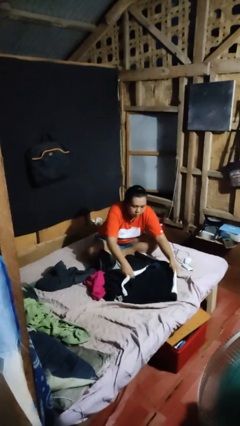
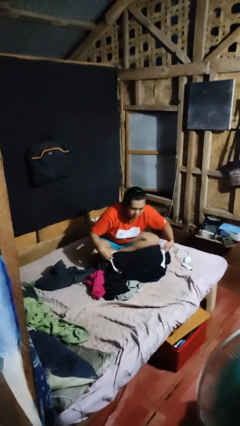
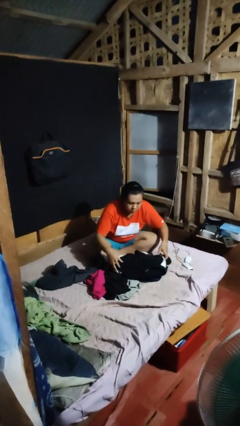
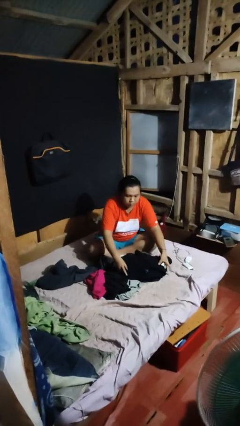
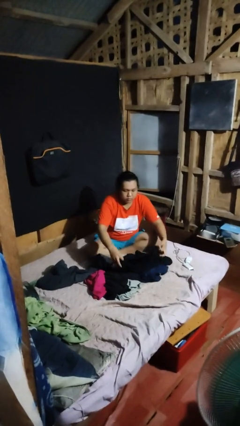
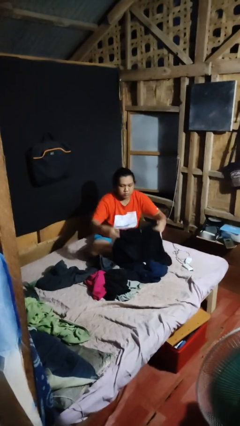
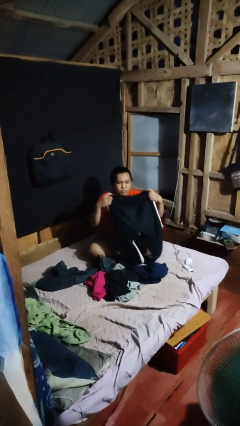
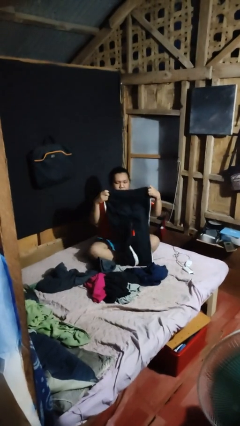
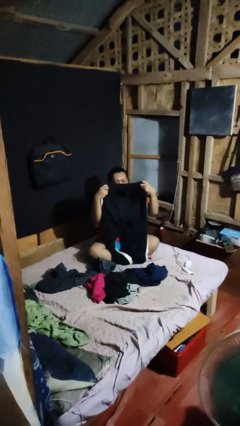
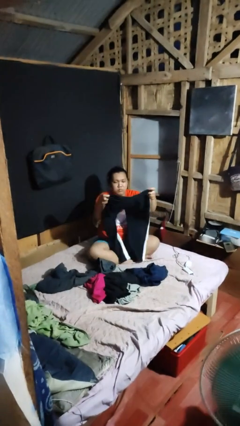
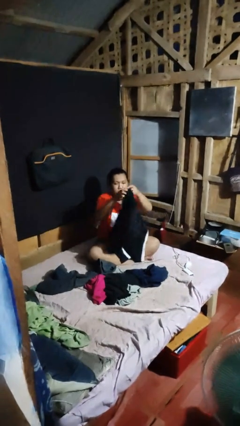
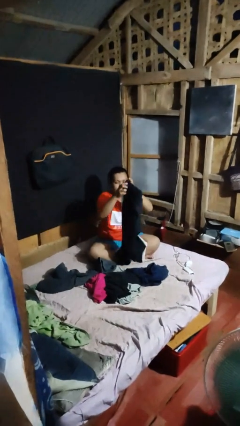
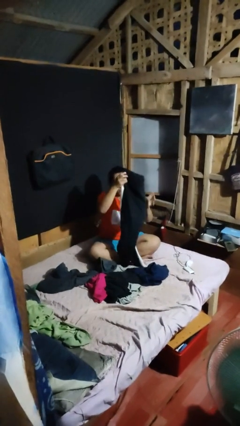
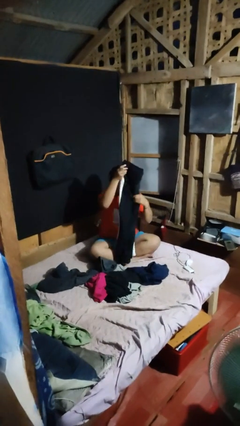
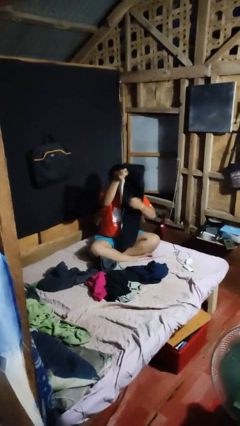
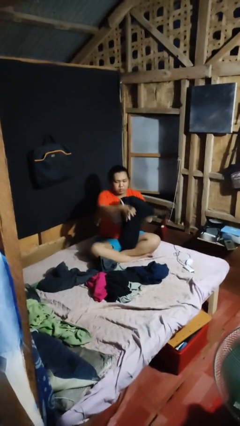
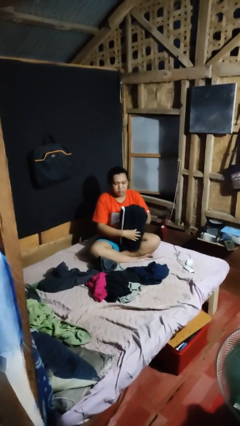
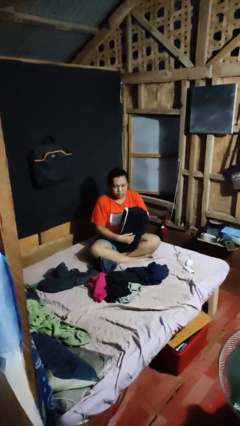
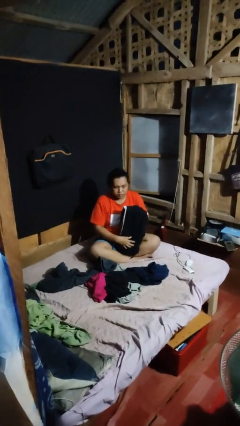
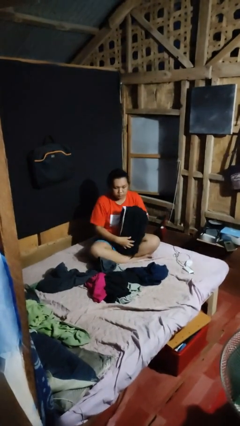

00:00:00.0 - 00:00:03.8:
person folds pants

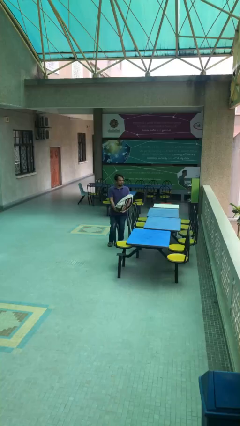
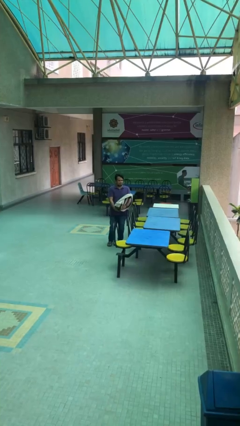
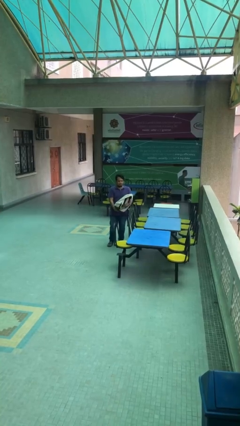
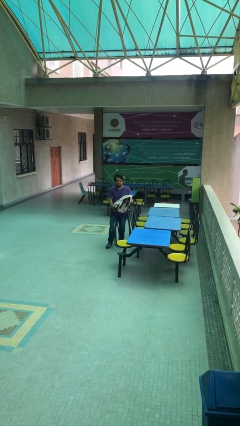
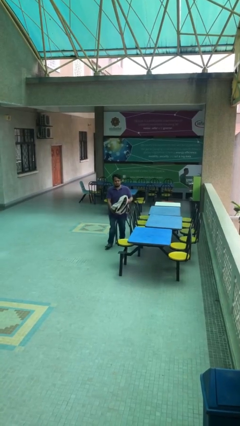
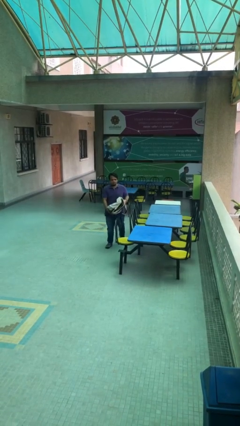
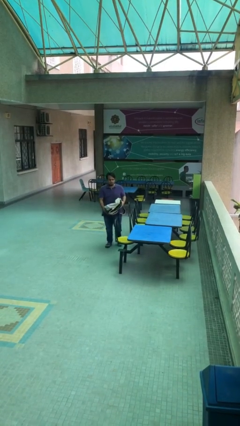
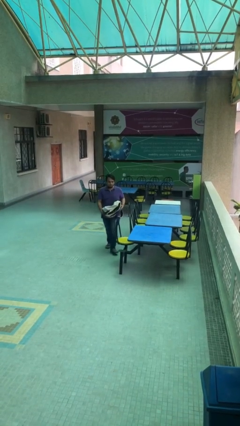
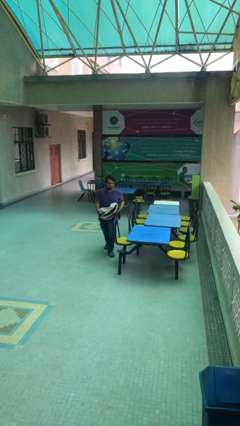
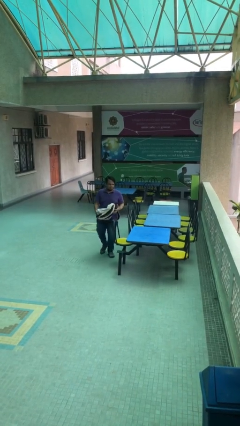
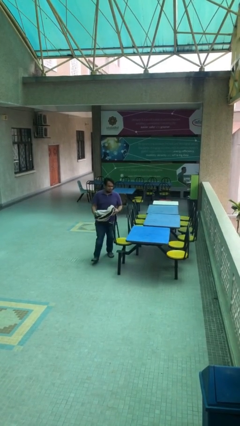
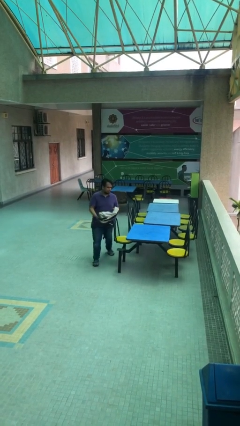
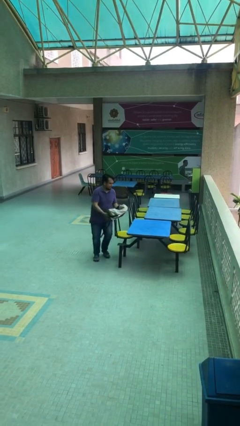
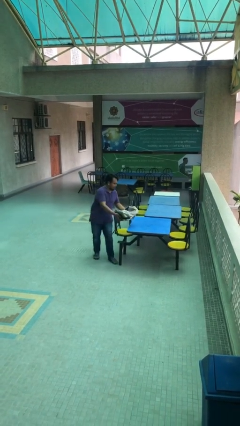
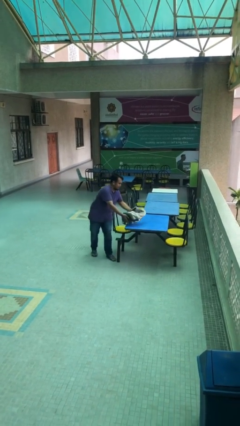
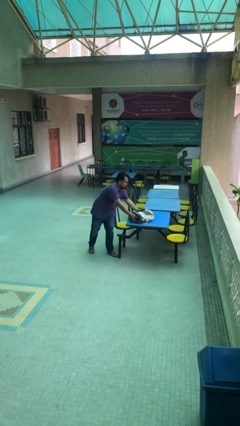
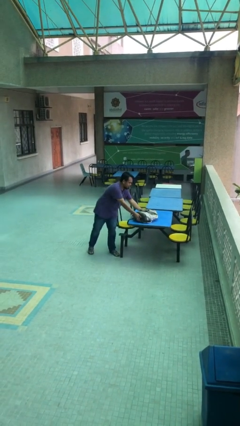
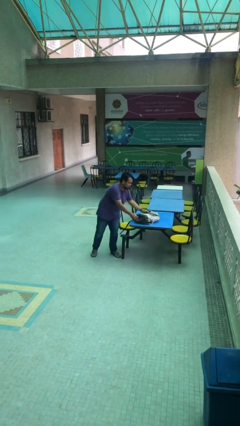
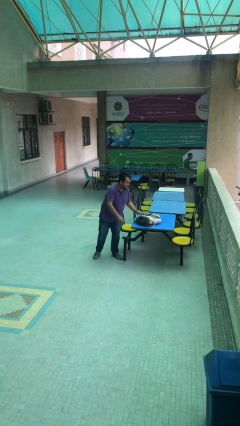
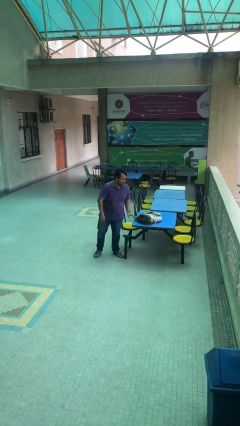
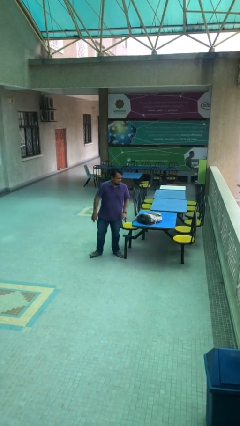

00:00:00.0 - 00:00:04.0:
person puts down object on table

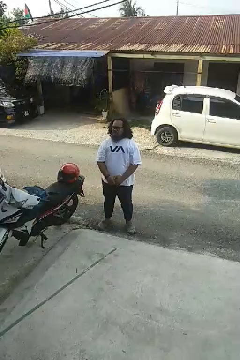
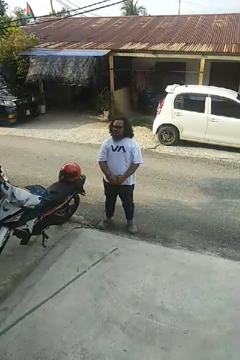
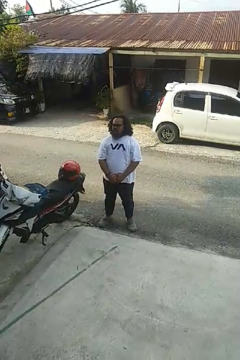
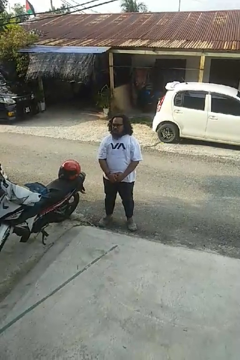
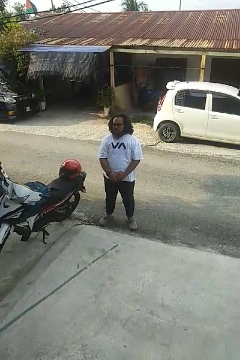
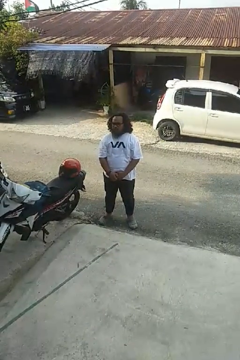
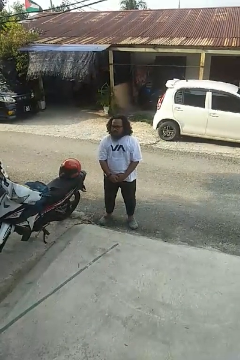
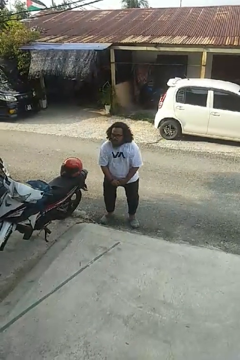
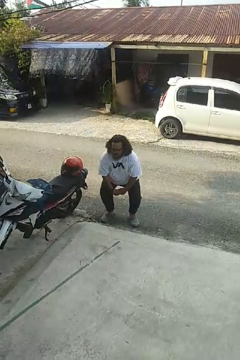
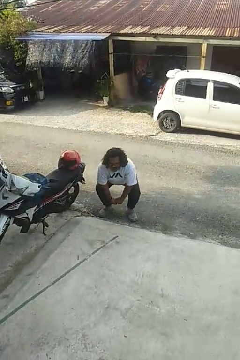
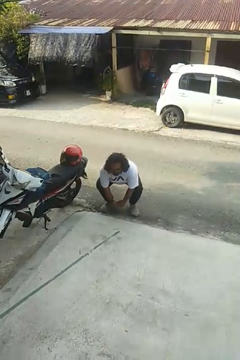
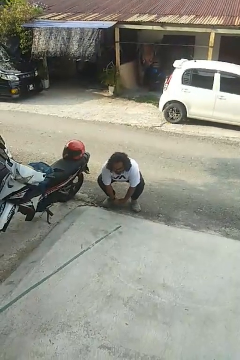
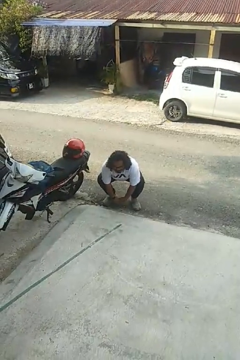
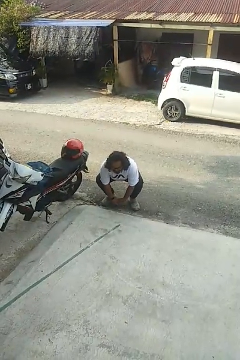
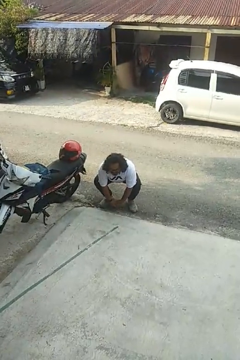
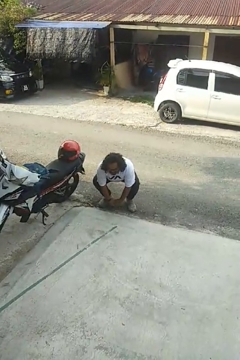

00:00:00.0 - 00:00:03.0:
person squats

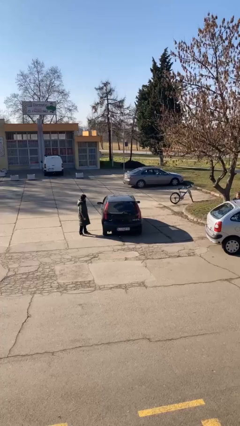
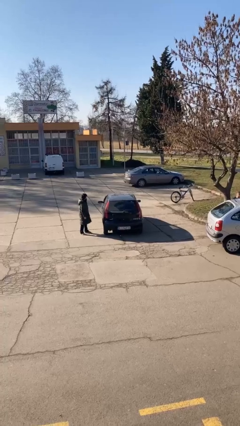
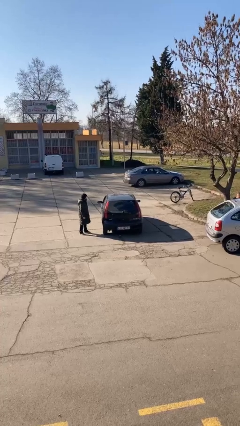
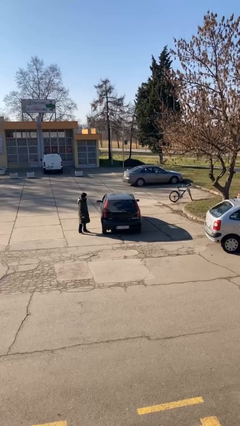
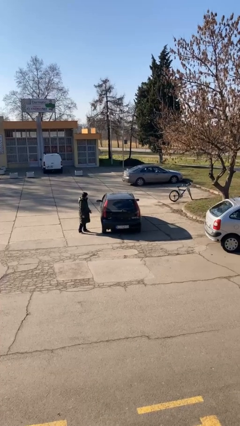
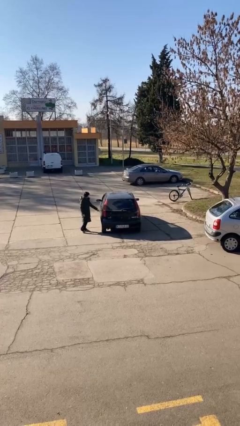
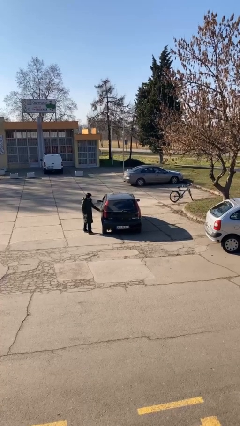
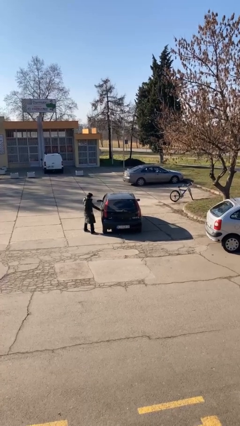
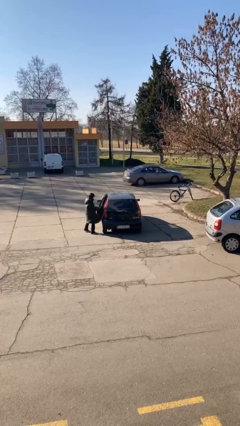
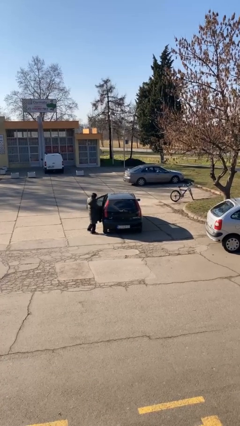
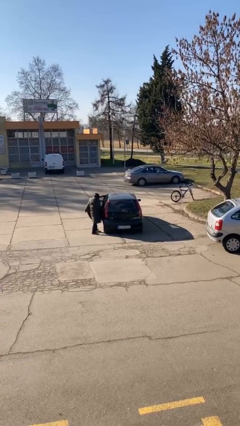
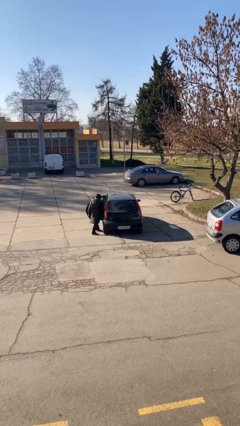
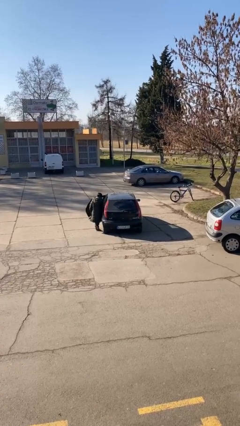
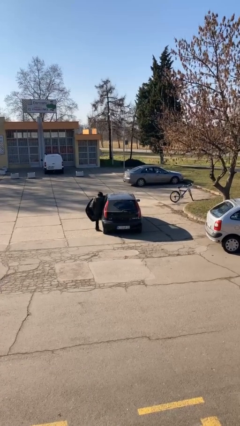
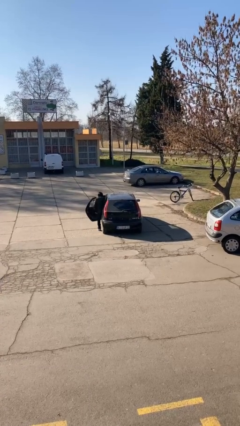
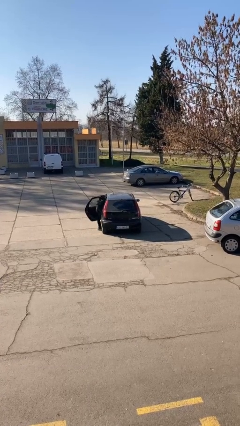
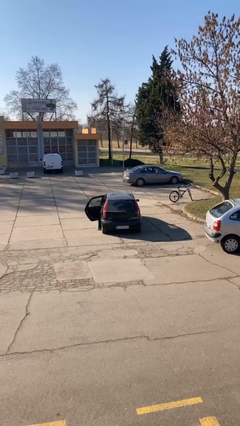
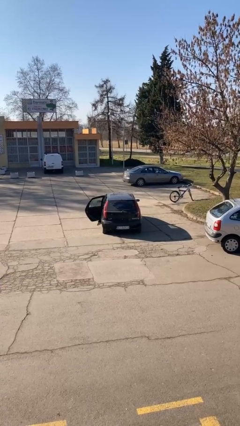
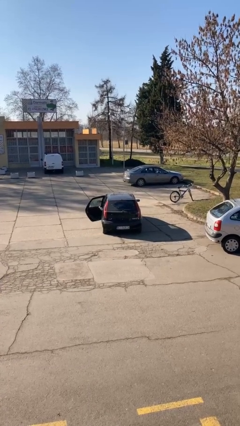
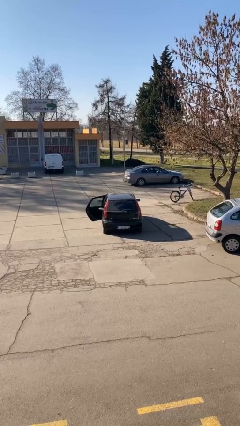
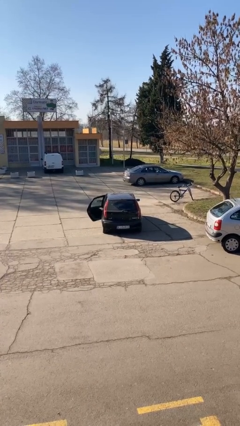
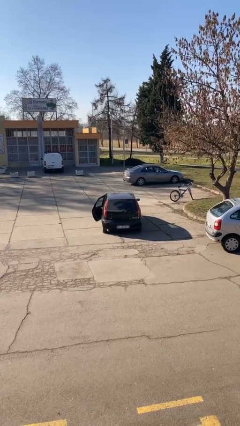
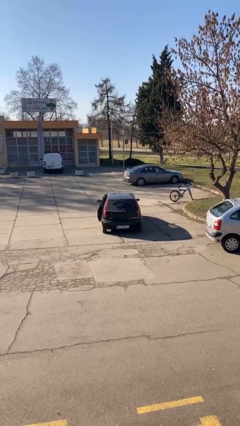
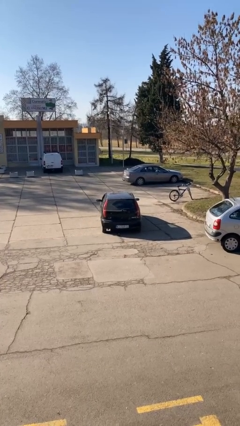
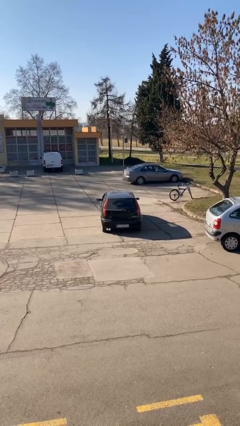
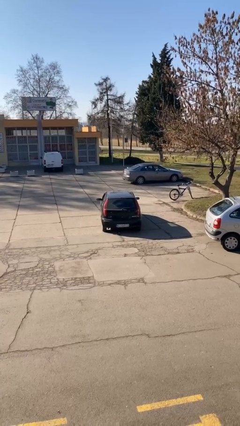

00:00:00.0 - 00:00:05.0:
car picks up person

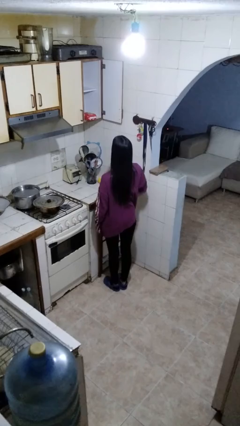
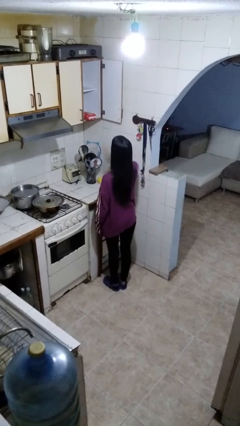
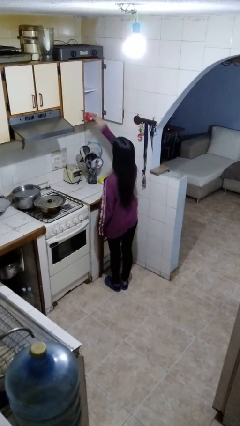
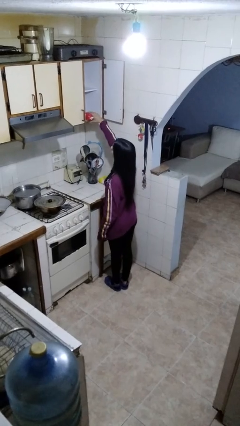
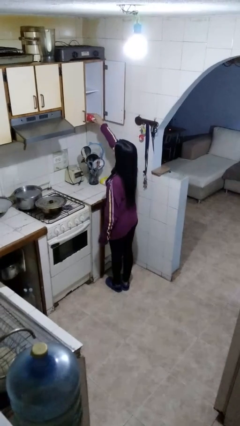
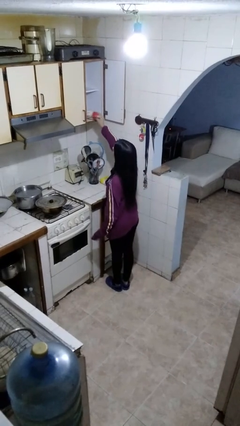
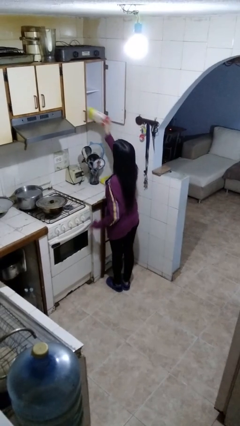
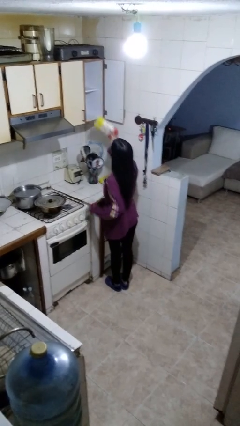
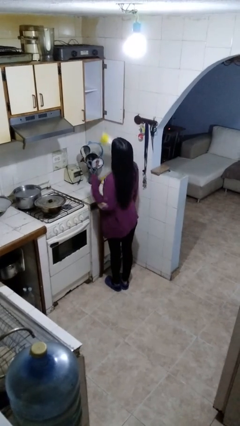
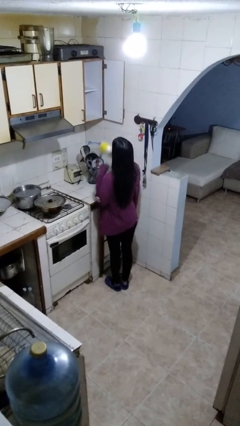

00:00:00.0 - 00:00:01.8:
person puts down object into cabinet

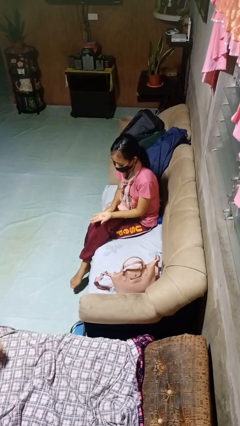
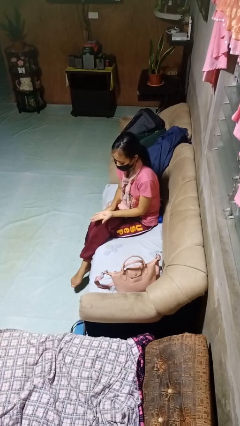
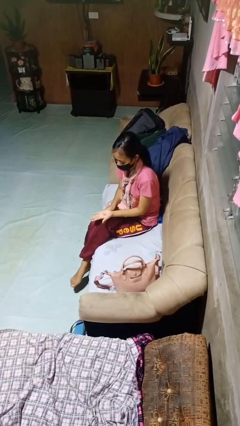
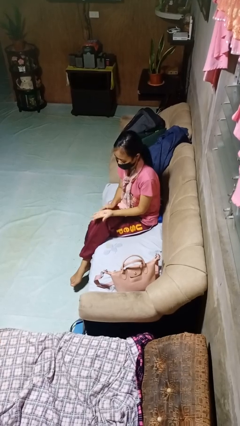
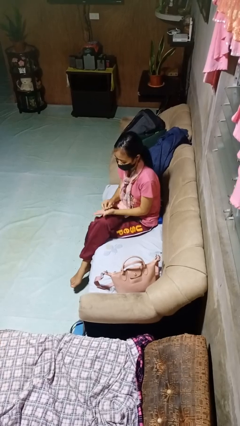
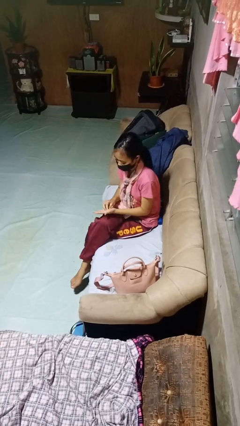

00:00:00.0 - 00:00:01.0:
person puts on ring
